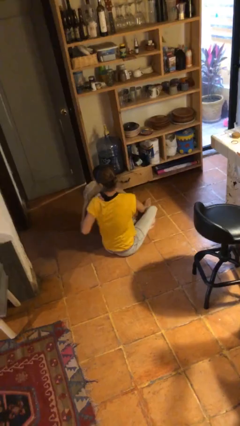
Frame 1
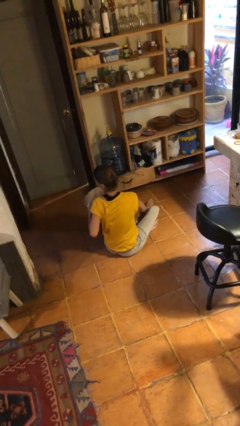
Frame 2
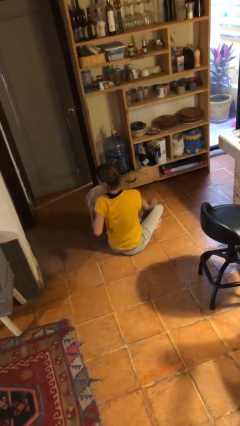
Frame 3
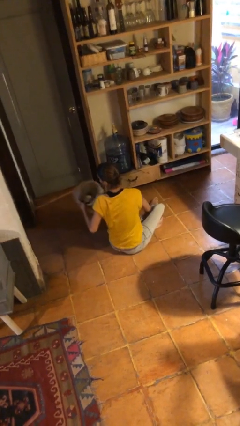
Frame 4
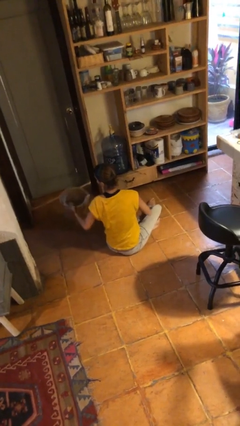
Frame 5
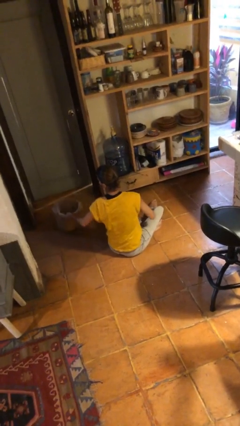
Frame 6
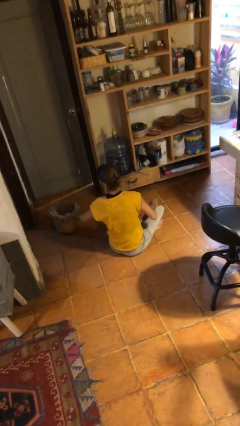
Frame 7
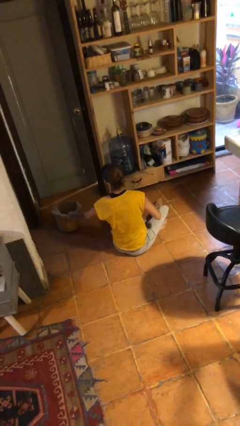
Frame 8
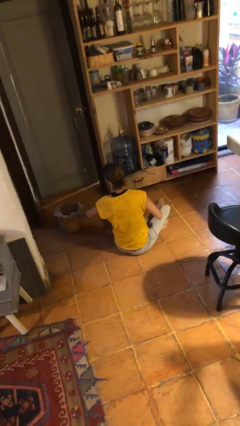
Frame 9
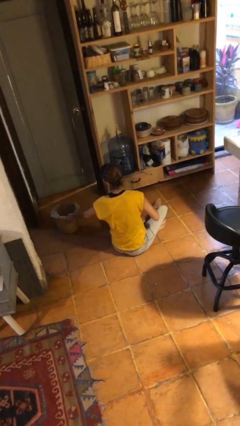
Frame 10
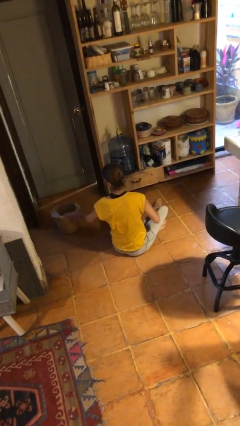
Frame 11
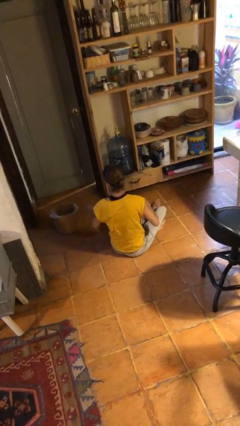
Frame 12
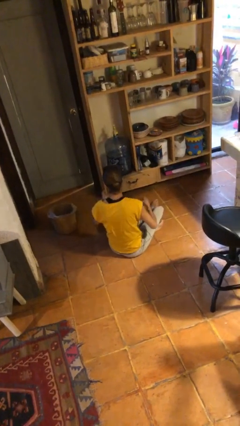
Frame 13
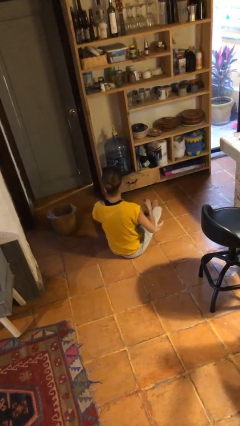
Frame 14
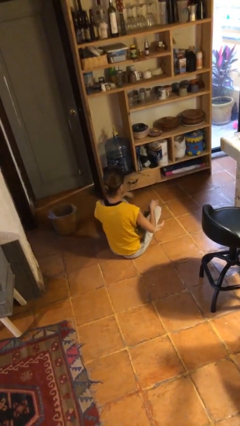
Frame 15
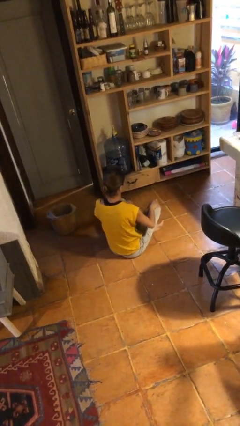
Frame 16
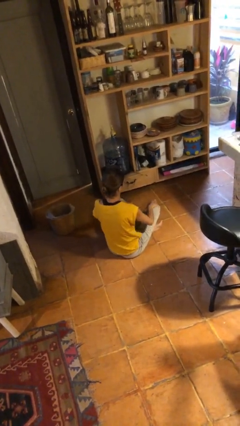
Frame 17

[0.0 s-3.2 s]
person puts down object on floor

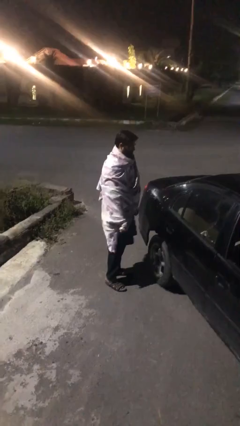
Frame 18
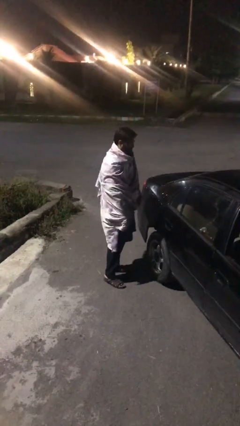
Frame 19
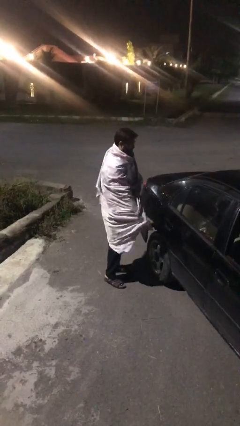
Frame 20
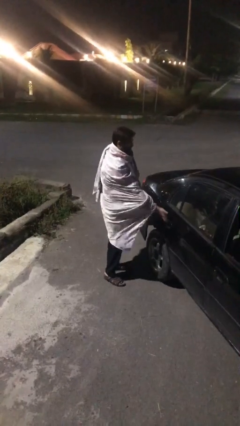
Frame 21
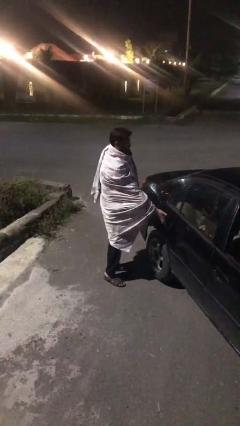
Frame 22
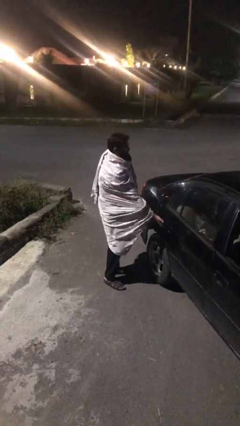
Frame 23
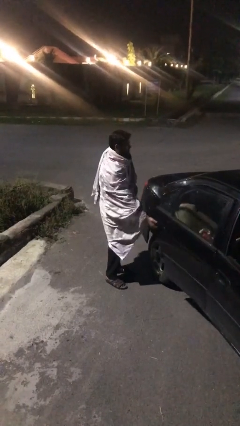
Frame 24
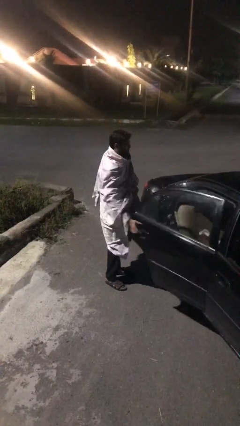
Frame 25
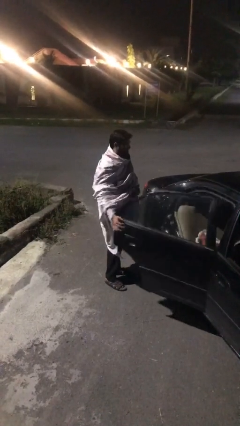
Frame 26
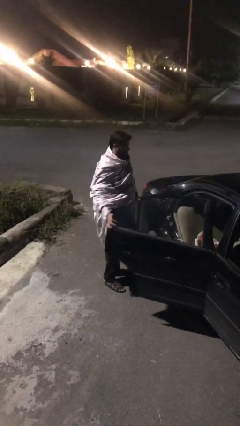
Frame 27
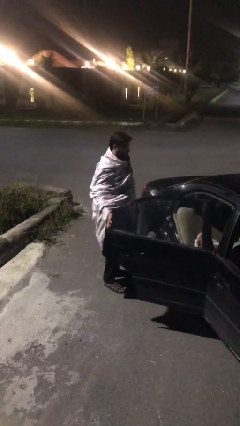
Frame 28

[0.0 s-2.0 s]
person opens car door

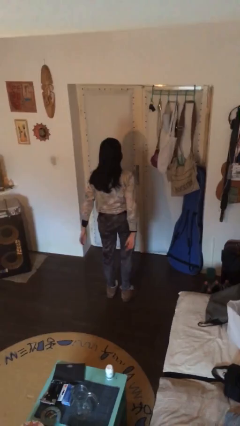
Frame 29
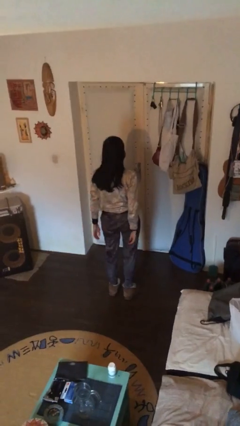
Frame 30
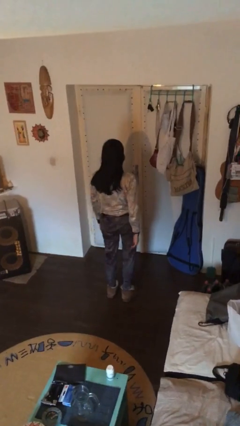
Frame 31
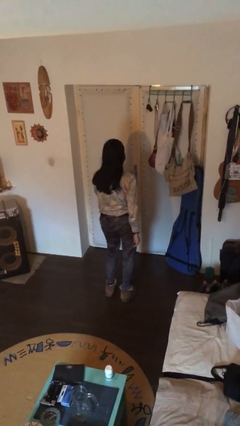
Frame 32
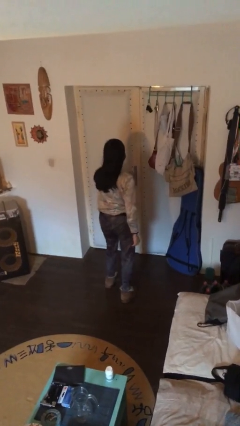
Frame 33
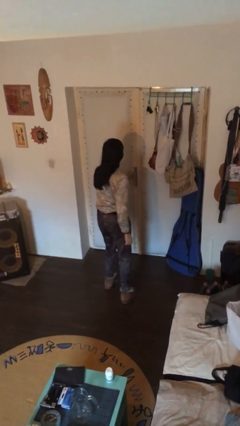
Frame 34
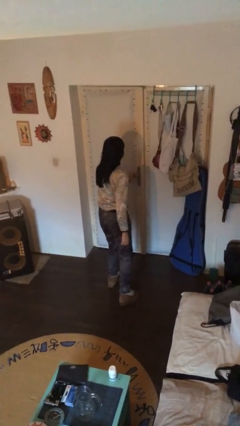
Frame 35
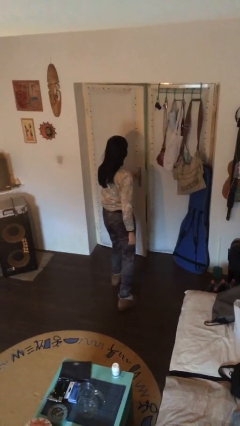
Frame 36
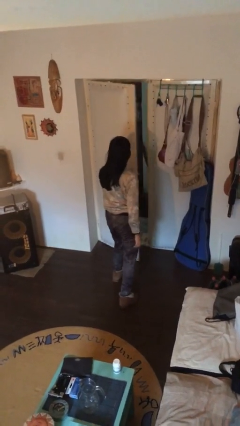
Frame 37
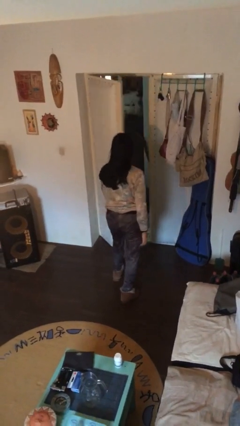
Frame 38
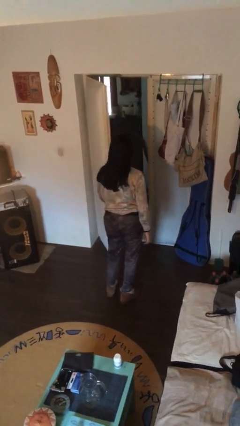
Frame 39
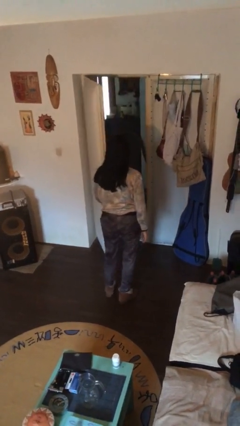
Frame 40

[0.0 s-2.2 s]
person opens facility door

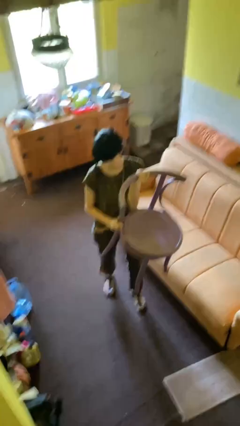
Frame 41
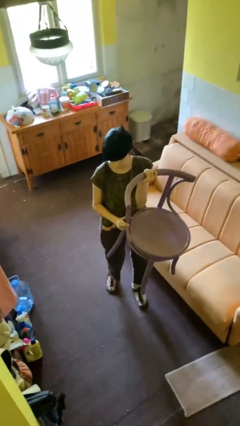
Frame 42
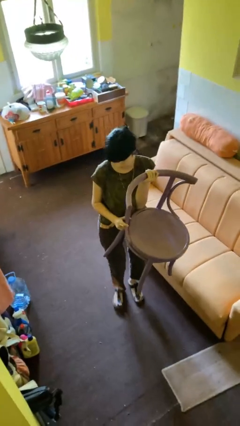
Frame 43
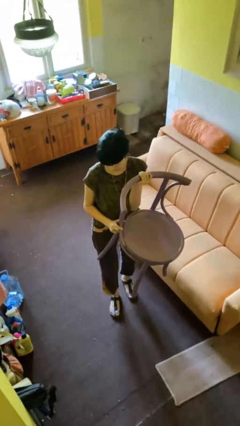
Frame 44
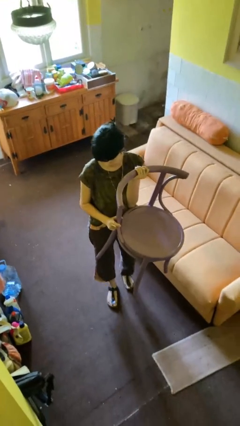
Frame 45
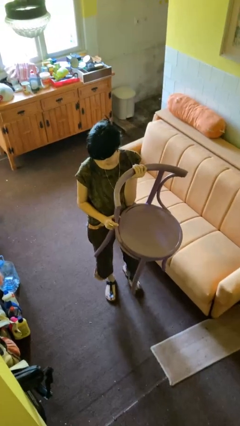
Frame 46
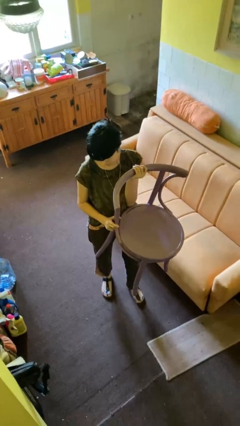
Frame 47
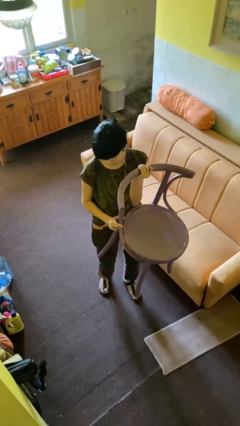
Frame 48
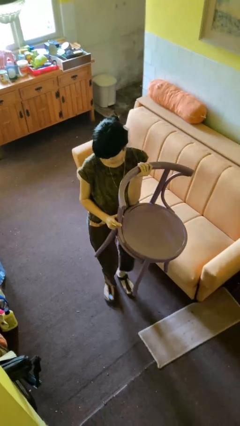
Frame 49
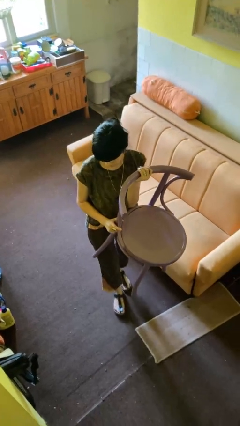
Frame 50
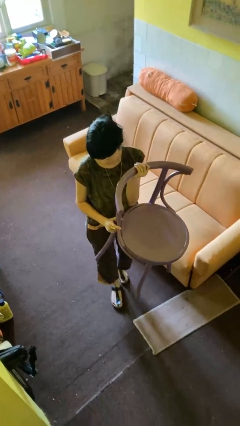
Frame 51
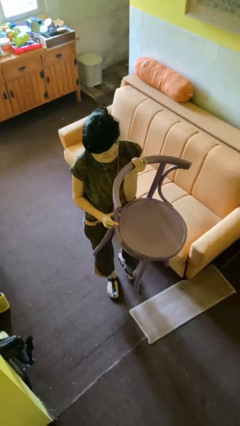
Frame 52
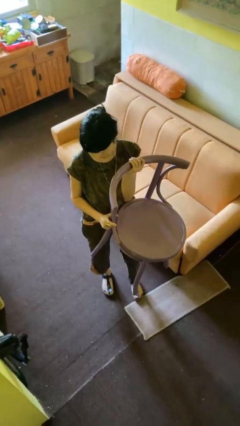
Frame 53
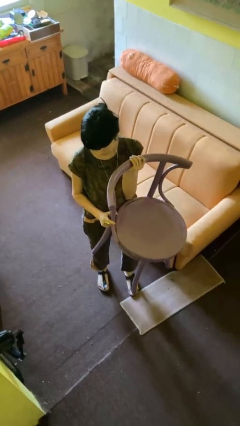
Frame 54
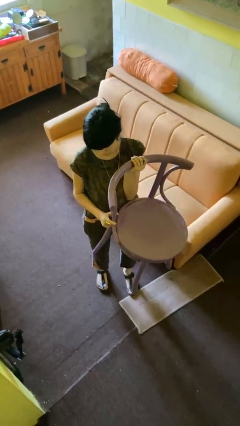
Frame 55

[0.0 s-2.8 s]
person carries furniture

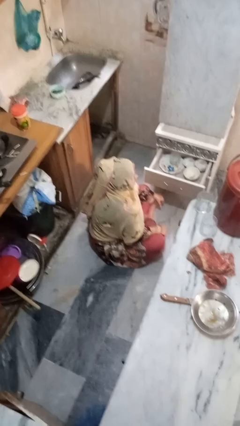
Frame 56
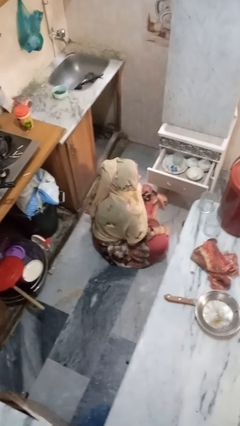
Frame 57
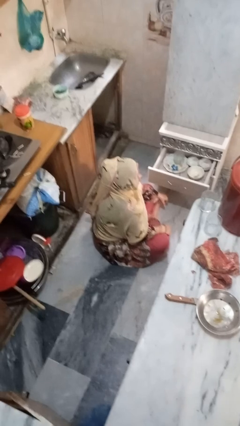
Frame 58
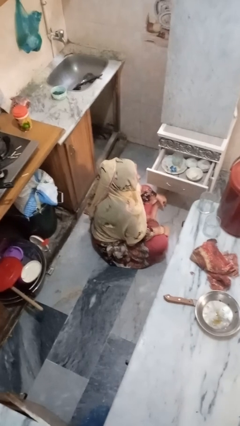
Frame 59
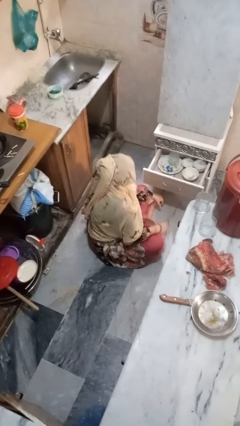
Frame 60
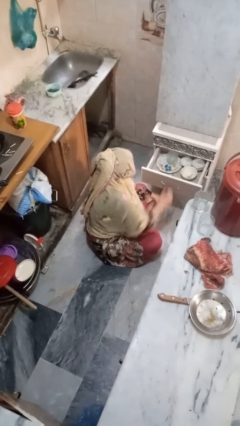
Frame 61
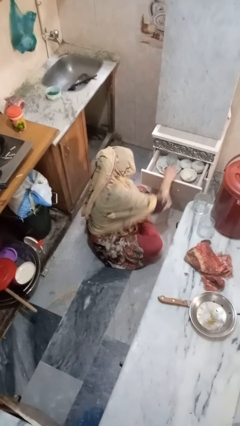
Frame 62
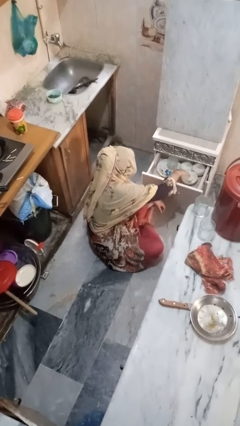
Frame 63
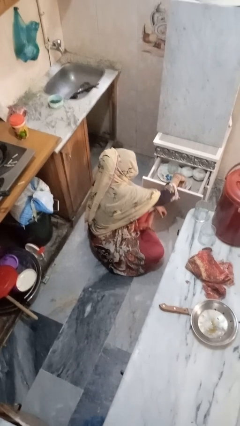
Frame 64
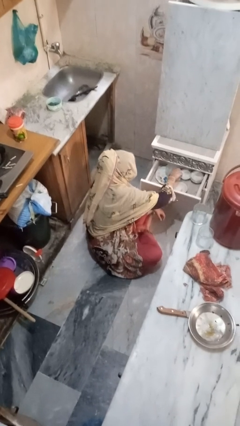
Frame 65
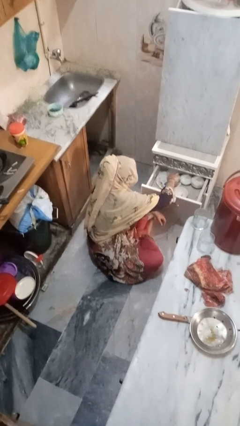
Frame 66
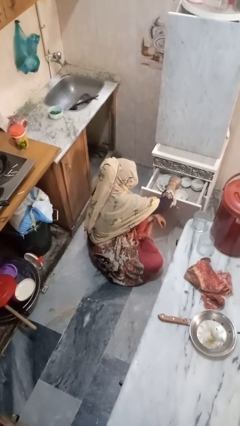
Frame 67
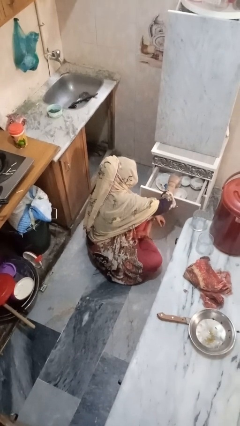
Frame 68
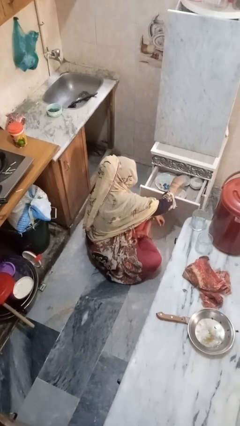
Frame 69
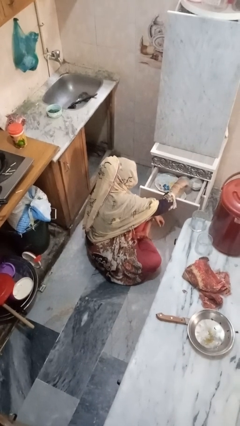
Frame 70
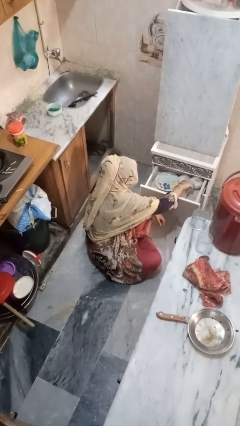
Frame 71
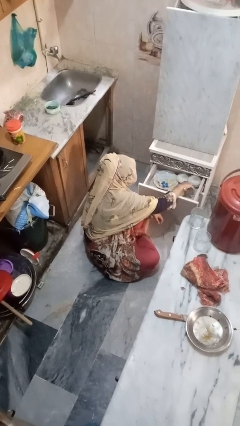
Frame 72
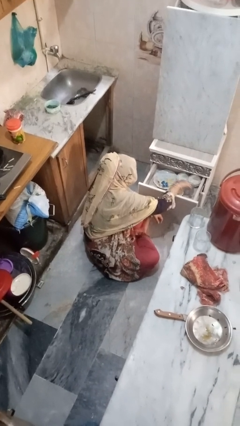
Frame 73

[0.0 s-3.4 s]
person searches in kitchen drawer

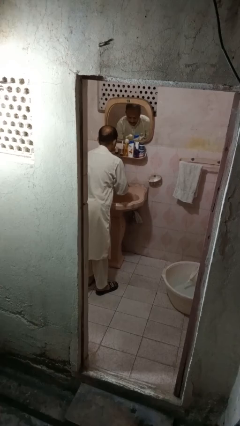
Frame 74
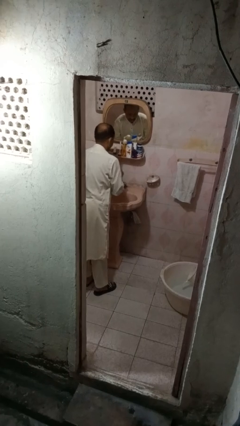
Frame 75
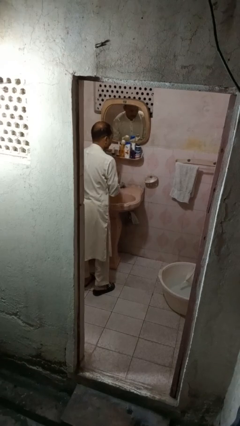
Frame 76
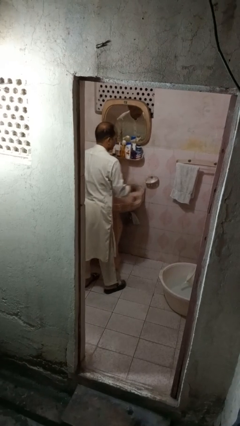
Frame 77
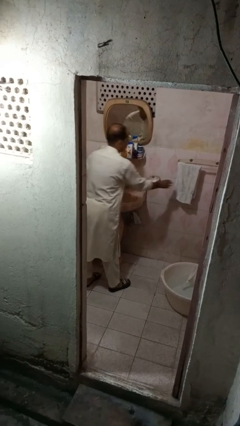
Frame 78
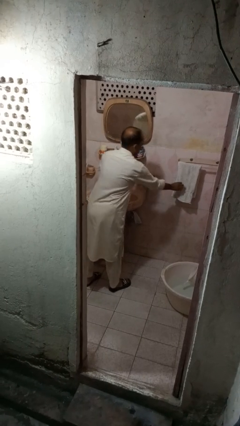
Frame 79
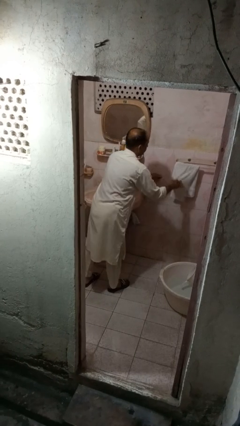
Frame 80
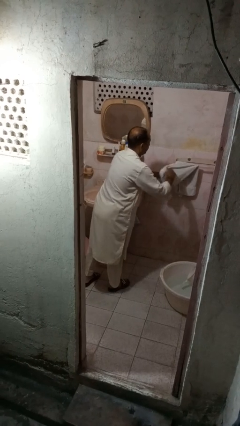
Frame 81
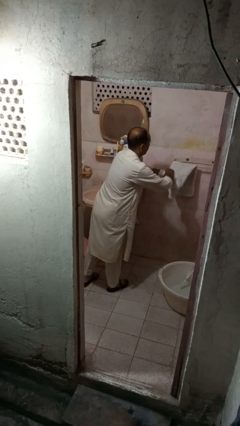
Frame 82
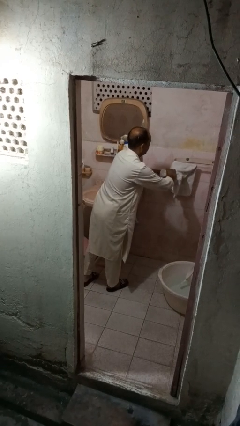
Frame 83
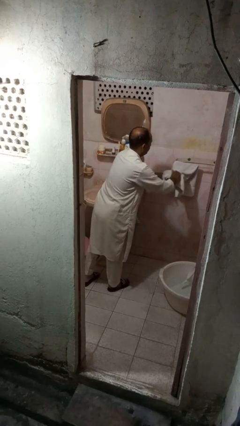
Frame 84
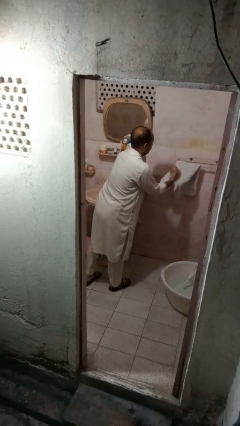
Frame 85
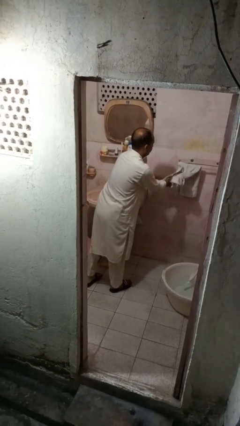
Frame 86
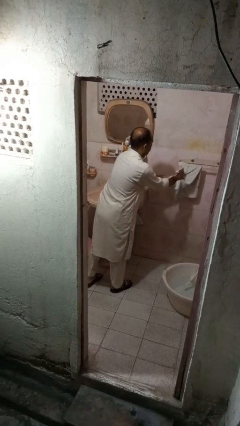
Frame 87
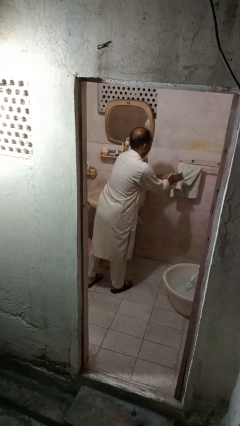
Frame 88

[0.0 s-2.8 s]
person dries hands with towel

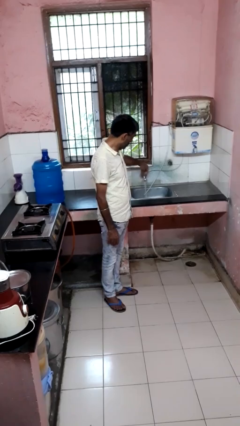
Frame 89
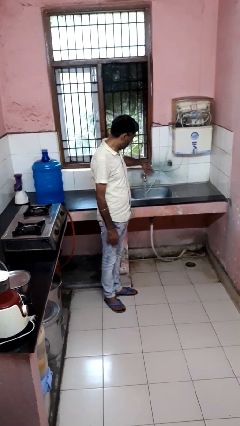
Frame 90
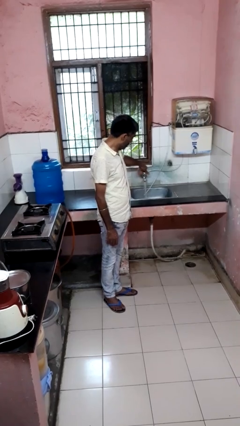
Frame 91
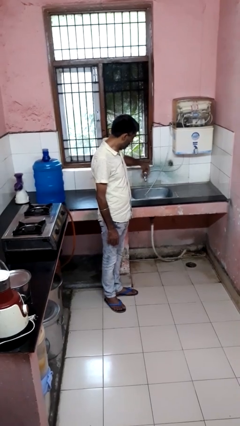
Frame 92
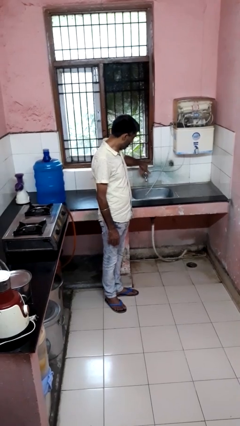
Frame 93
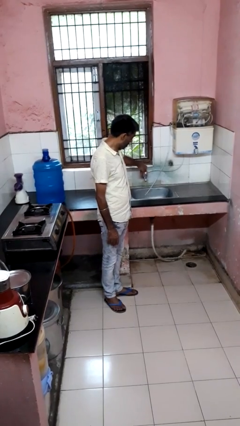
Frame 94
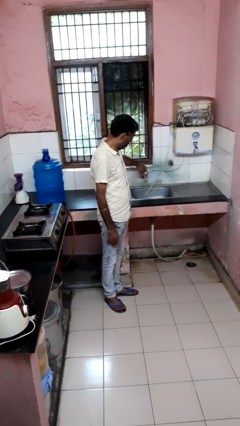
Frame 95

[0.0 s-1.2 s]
person turns off faucet
